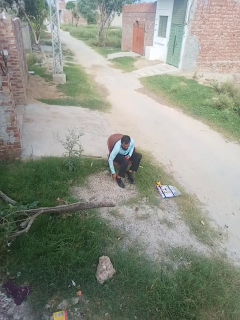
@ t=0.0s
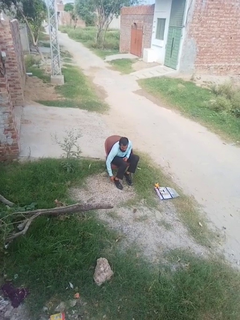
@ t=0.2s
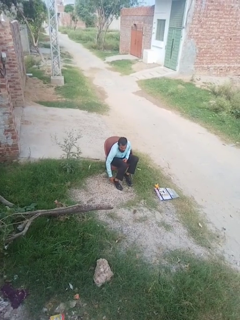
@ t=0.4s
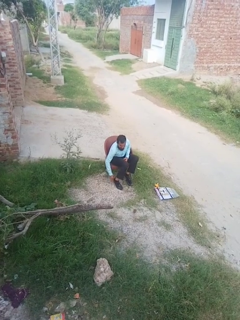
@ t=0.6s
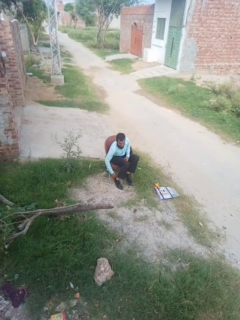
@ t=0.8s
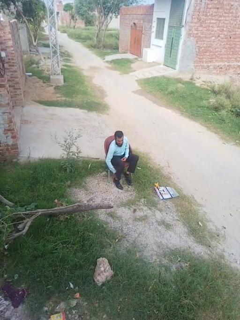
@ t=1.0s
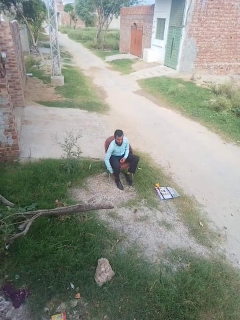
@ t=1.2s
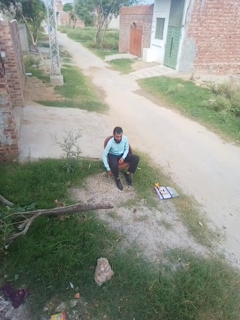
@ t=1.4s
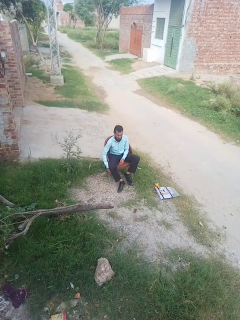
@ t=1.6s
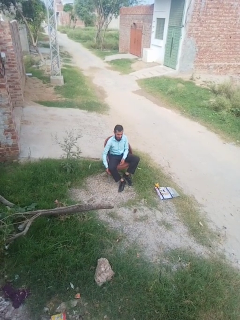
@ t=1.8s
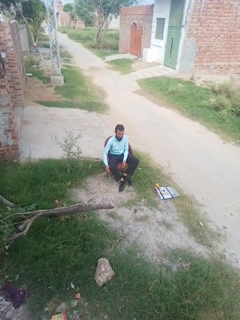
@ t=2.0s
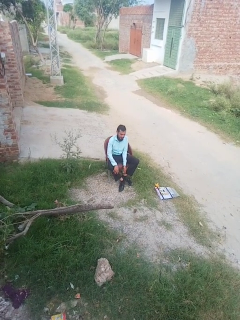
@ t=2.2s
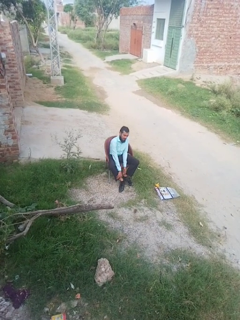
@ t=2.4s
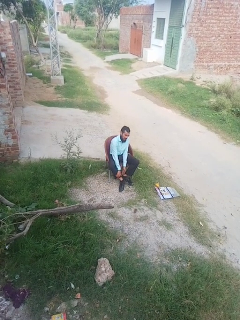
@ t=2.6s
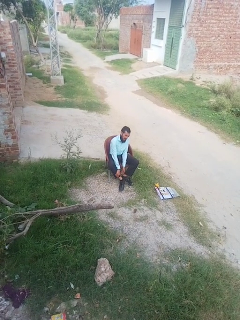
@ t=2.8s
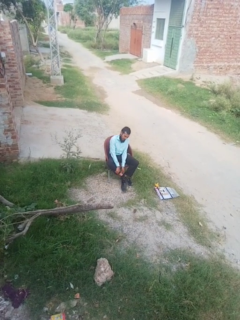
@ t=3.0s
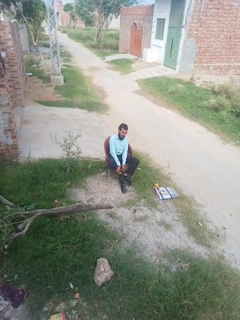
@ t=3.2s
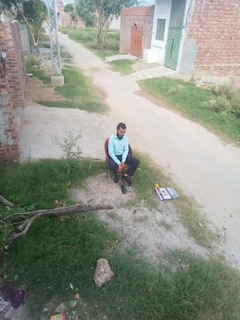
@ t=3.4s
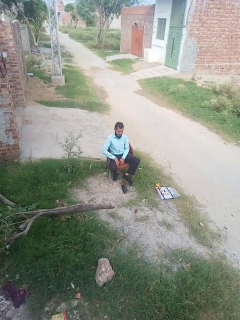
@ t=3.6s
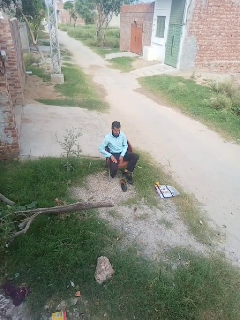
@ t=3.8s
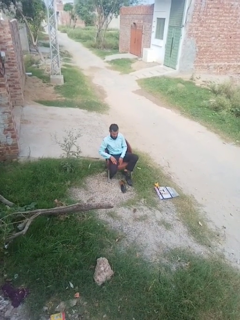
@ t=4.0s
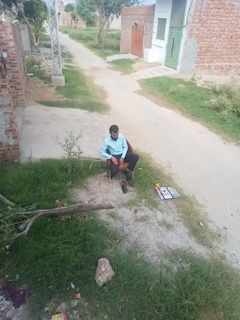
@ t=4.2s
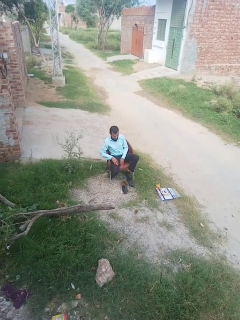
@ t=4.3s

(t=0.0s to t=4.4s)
person takes off shoes

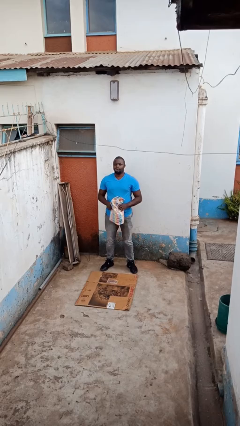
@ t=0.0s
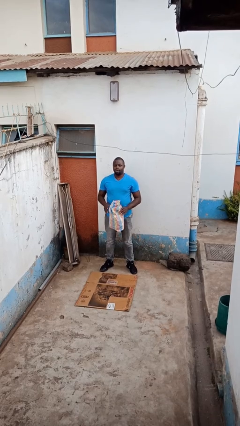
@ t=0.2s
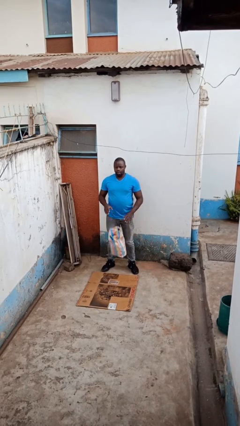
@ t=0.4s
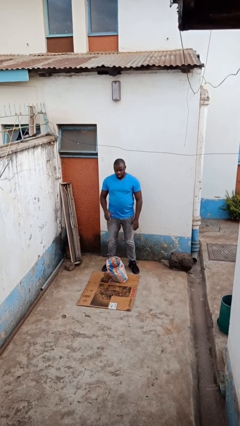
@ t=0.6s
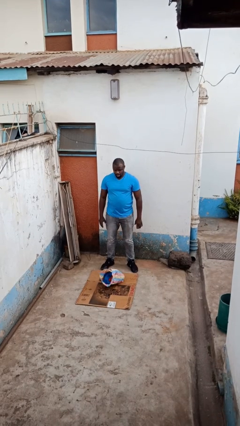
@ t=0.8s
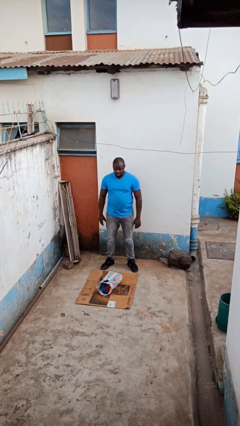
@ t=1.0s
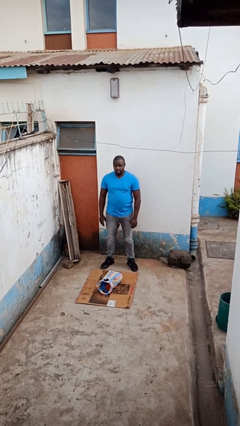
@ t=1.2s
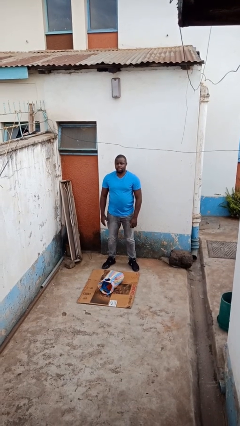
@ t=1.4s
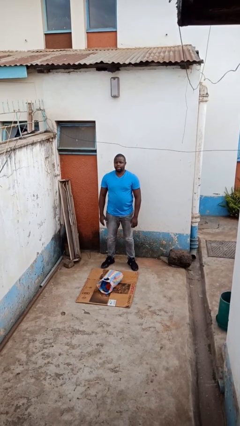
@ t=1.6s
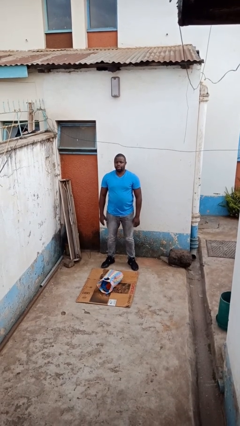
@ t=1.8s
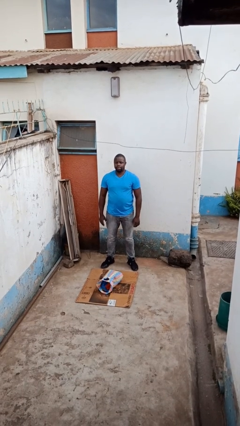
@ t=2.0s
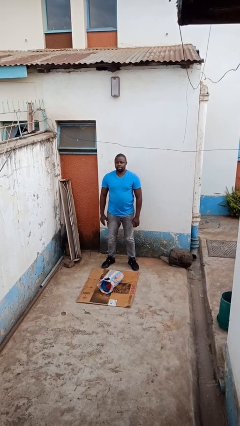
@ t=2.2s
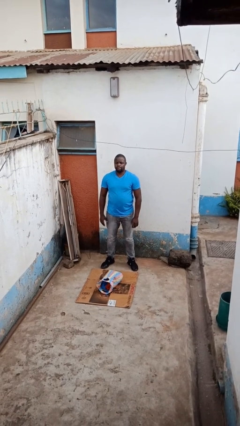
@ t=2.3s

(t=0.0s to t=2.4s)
person drops object

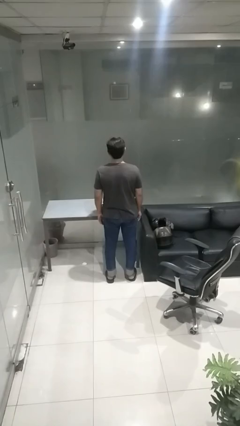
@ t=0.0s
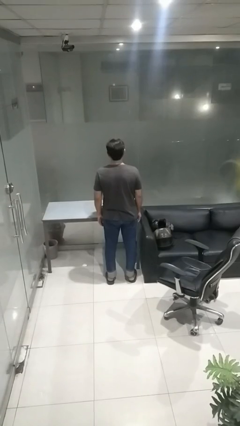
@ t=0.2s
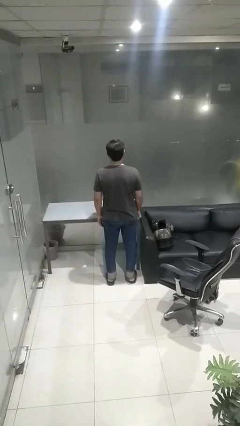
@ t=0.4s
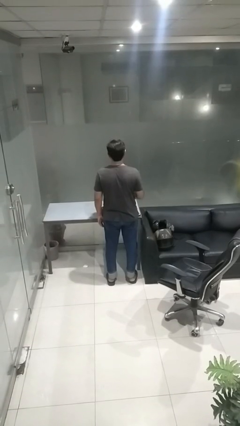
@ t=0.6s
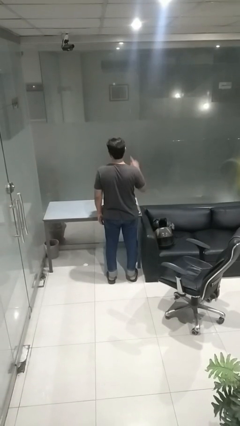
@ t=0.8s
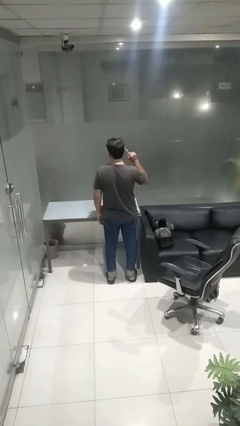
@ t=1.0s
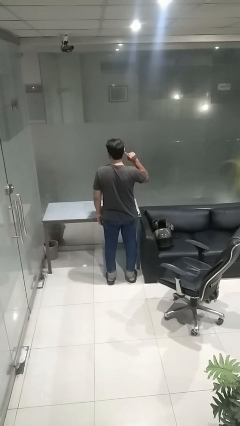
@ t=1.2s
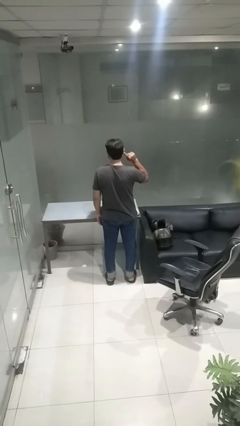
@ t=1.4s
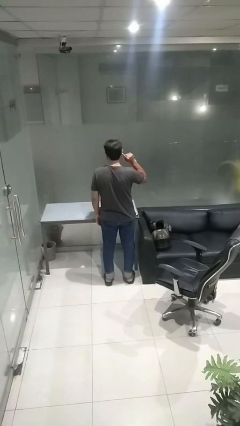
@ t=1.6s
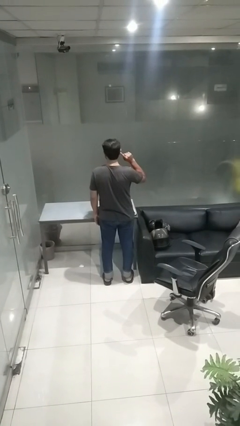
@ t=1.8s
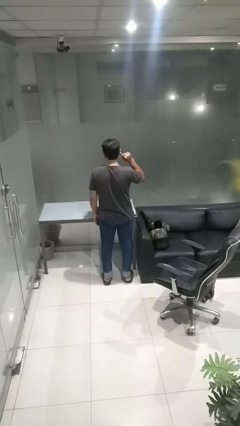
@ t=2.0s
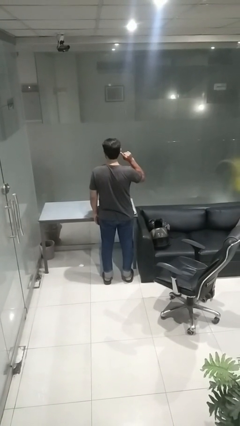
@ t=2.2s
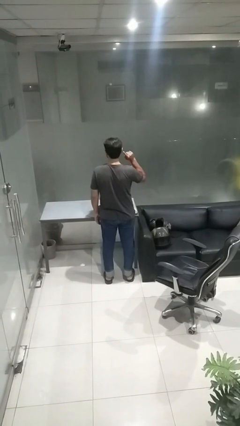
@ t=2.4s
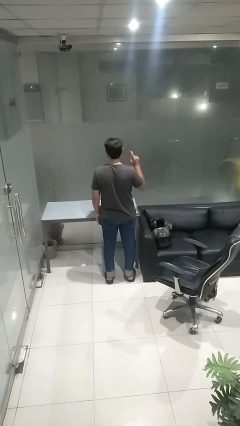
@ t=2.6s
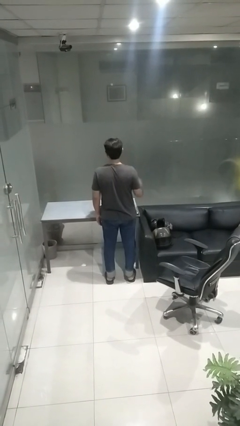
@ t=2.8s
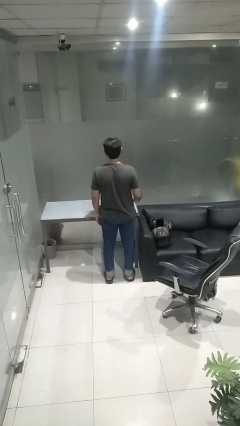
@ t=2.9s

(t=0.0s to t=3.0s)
person gestures listen closely

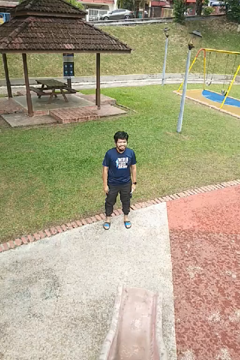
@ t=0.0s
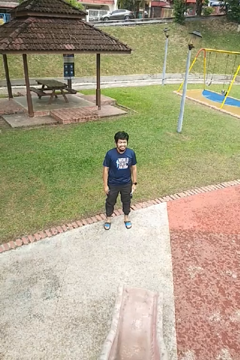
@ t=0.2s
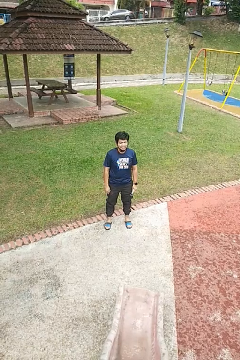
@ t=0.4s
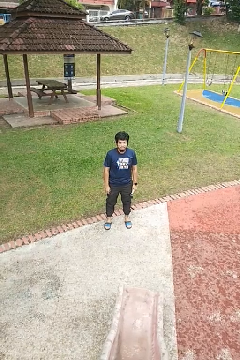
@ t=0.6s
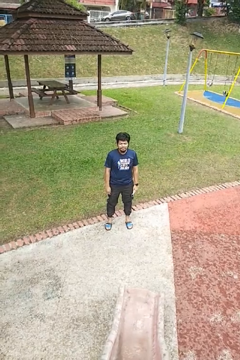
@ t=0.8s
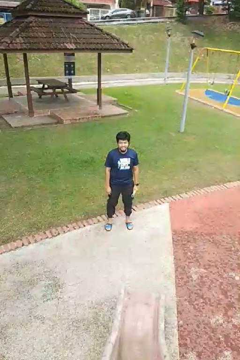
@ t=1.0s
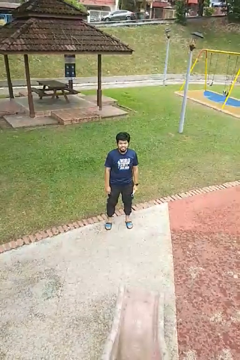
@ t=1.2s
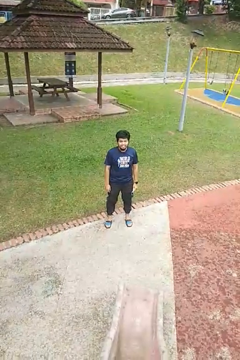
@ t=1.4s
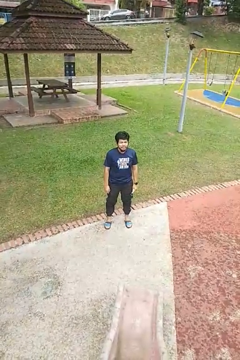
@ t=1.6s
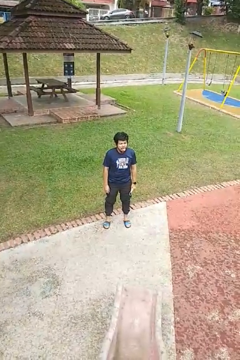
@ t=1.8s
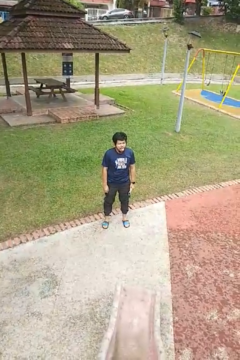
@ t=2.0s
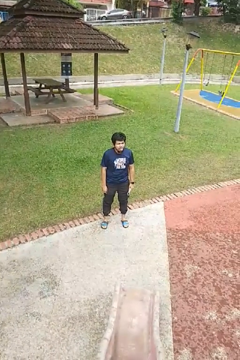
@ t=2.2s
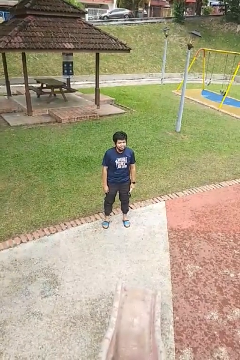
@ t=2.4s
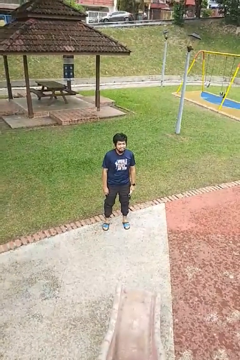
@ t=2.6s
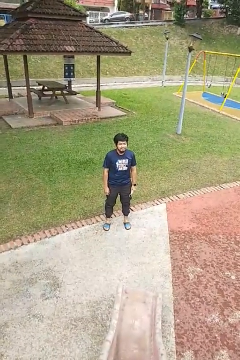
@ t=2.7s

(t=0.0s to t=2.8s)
person sticks out tongue

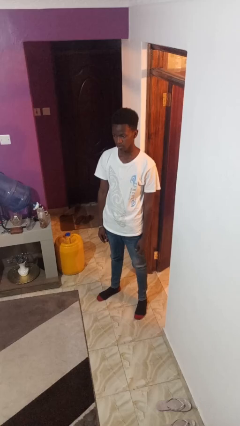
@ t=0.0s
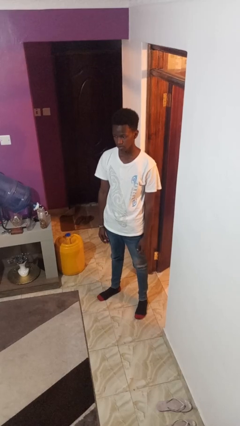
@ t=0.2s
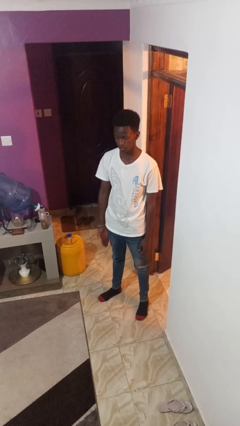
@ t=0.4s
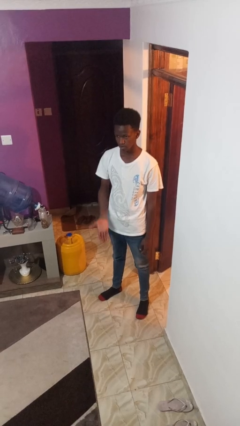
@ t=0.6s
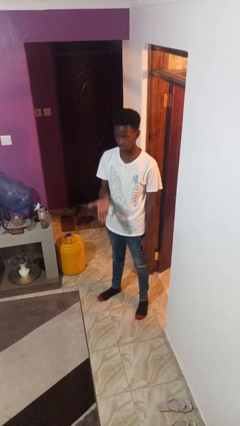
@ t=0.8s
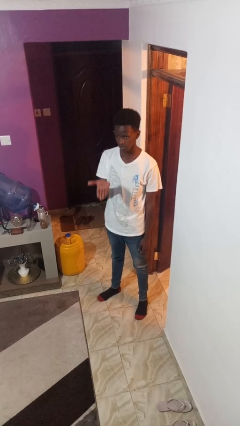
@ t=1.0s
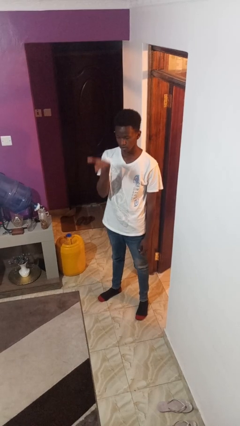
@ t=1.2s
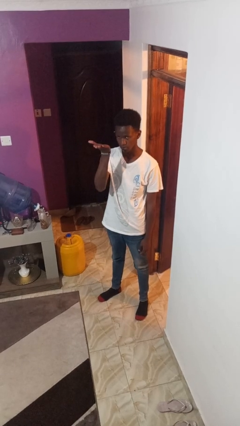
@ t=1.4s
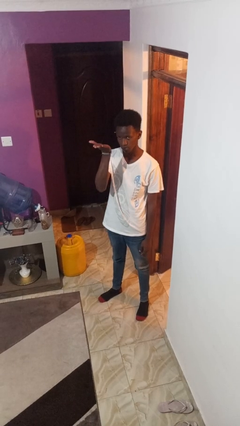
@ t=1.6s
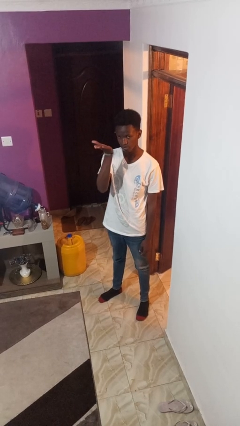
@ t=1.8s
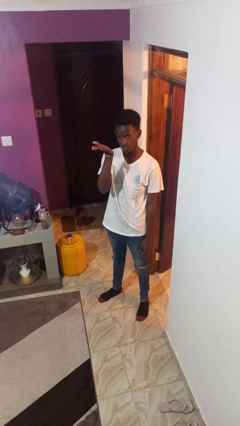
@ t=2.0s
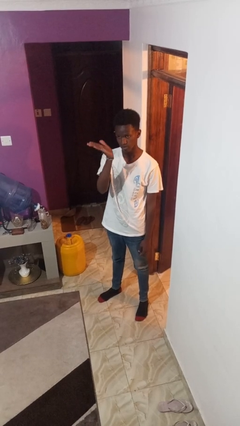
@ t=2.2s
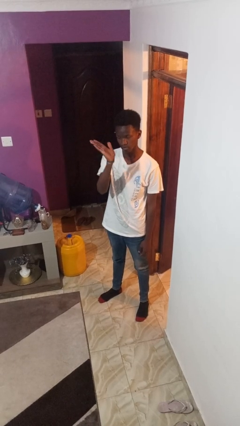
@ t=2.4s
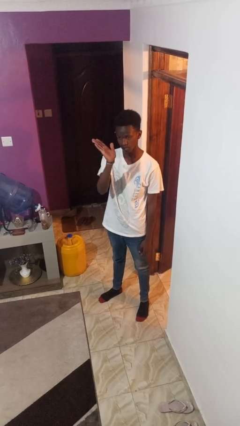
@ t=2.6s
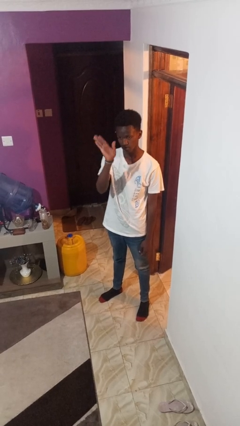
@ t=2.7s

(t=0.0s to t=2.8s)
person gestures swipe up

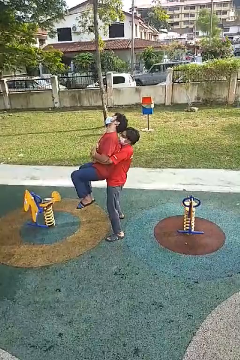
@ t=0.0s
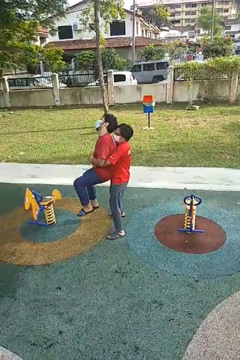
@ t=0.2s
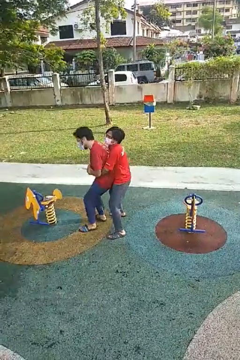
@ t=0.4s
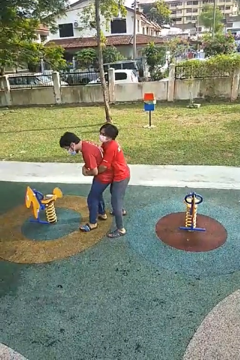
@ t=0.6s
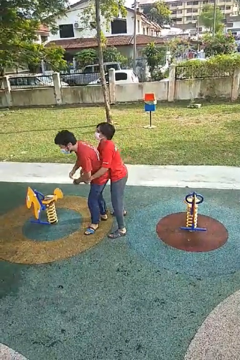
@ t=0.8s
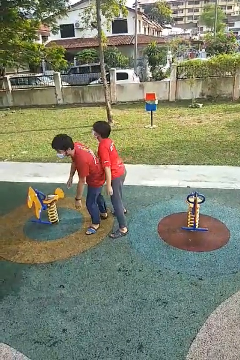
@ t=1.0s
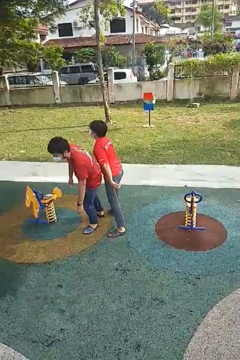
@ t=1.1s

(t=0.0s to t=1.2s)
person puts down person

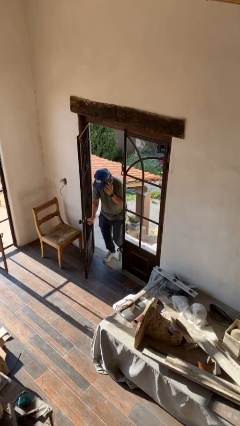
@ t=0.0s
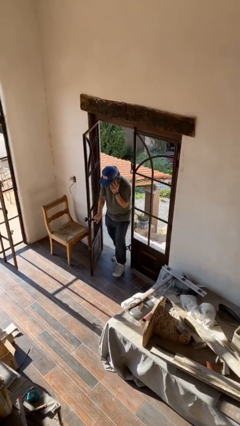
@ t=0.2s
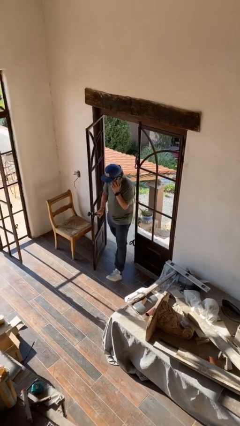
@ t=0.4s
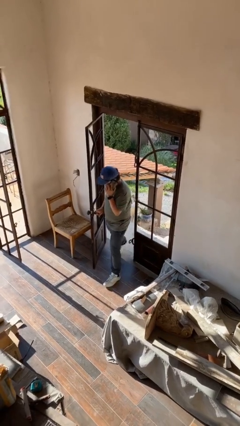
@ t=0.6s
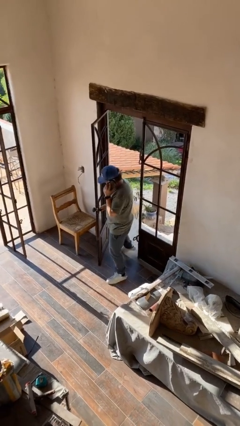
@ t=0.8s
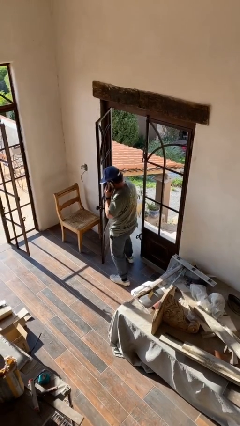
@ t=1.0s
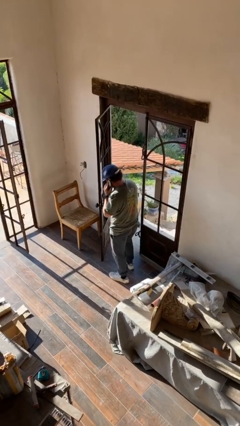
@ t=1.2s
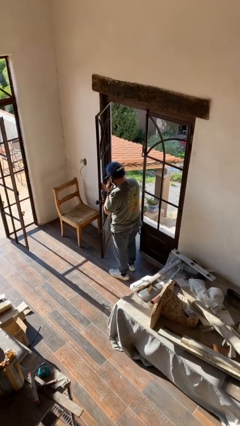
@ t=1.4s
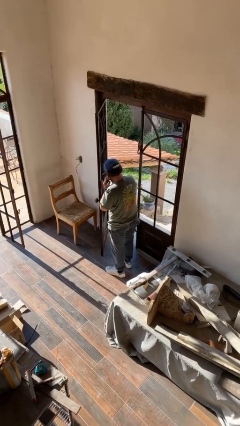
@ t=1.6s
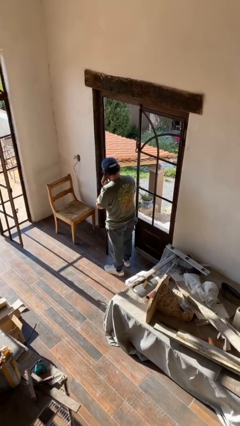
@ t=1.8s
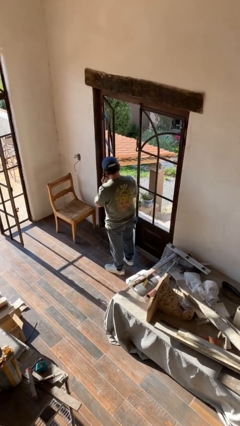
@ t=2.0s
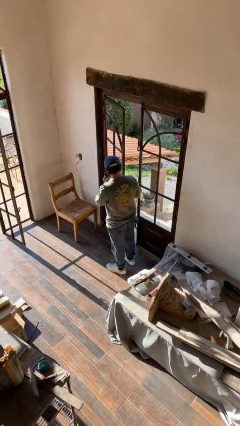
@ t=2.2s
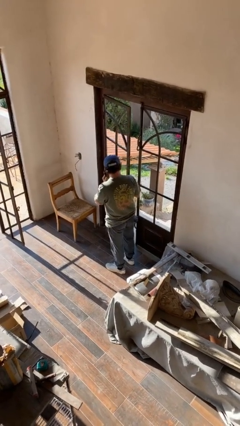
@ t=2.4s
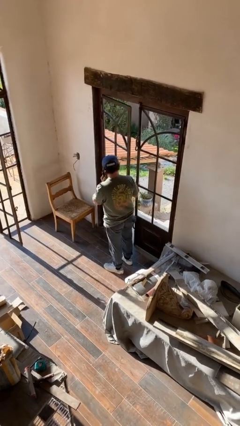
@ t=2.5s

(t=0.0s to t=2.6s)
person enters scene through structure
